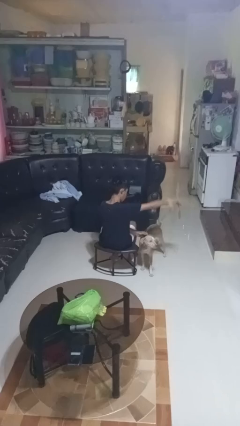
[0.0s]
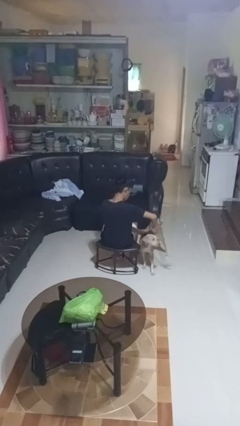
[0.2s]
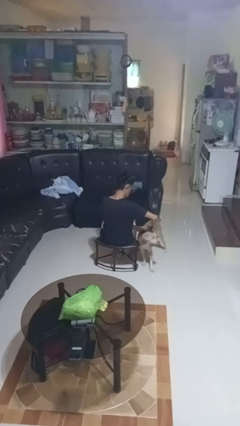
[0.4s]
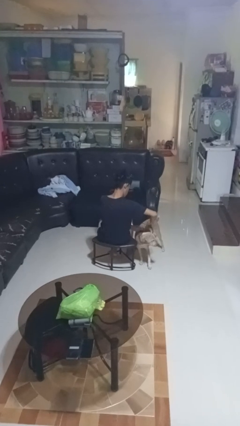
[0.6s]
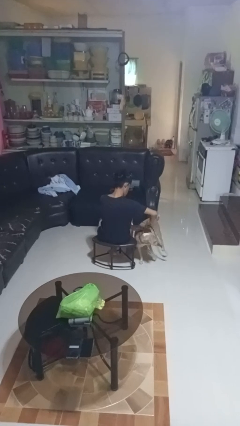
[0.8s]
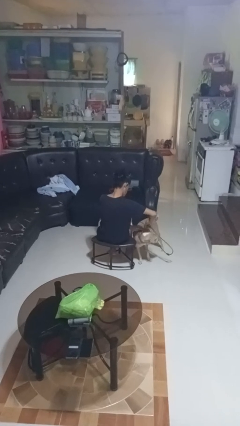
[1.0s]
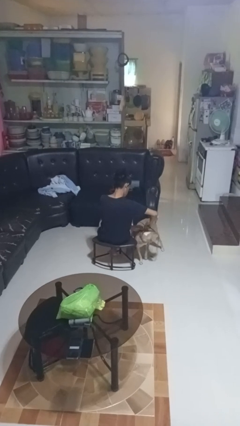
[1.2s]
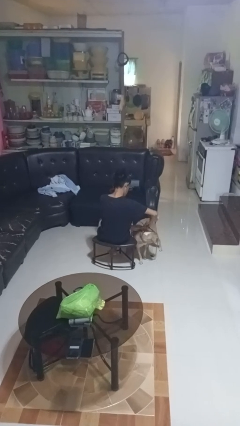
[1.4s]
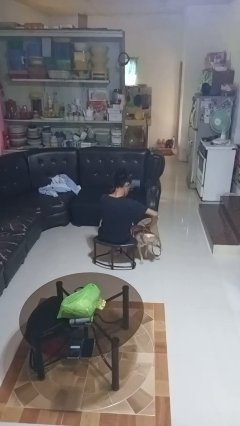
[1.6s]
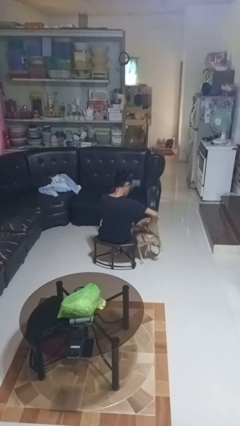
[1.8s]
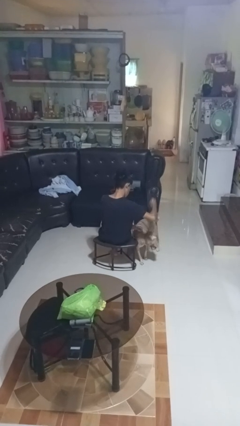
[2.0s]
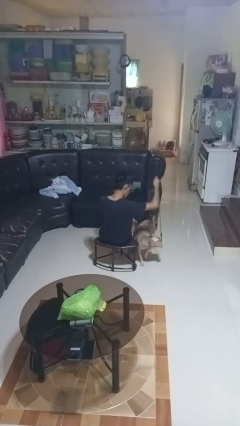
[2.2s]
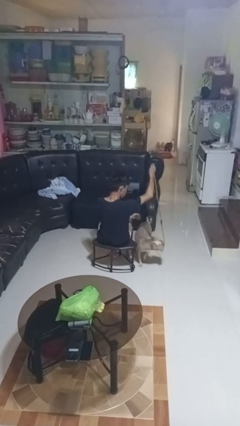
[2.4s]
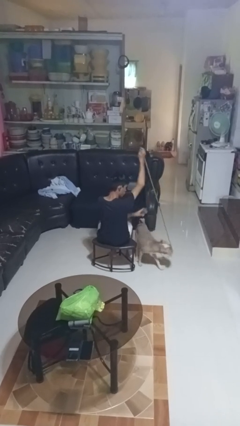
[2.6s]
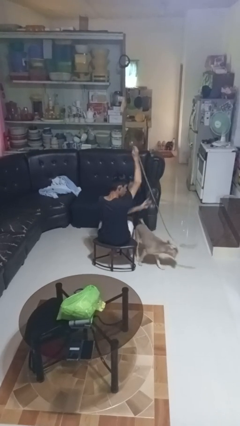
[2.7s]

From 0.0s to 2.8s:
person unattaches leash from dog

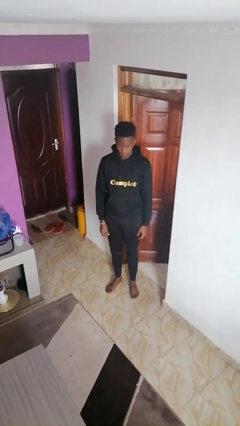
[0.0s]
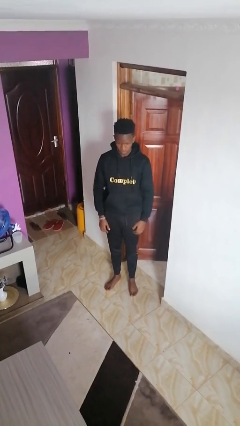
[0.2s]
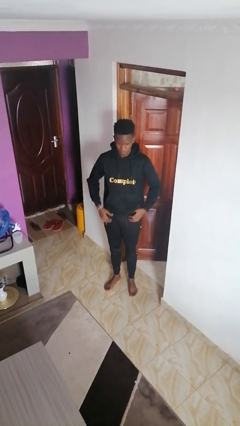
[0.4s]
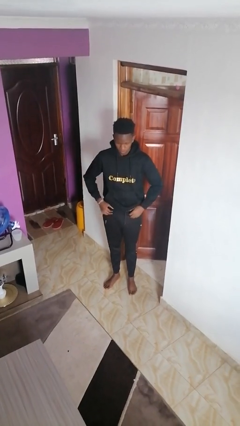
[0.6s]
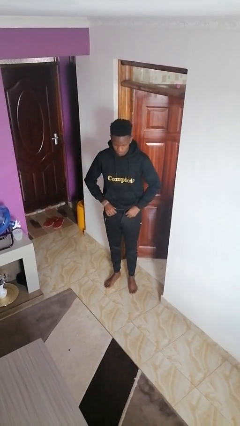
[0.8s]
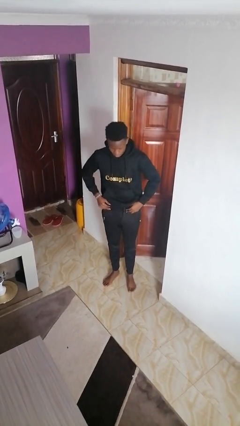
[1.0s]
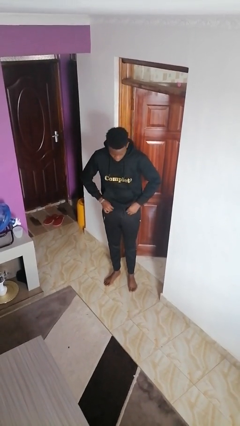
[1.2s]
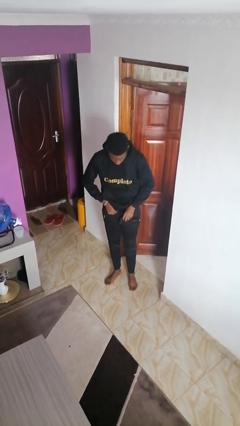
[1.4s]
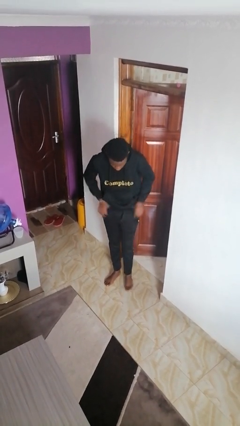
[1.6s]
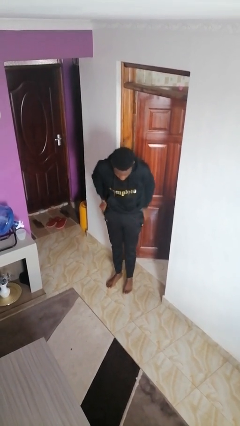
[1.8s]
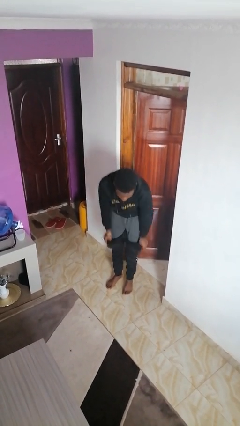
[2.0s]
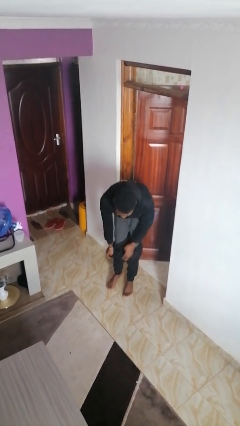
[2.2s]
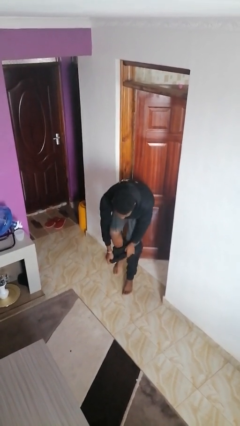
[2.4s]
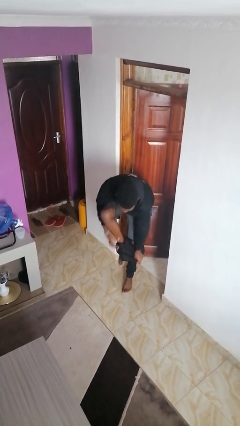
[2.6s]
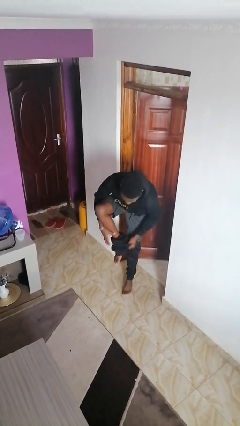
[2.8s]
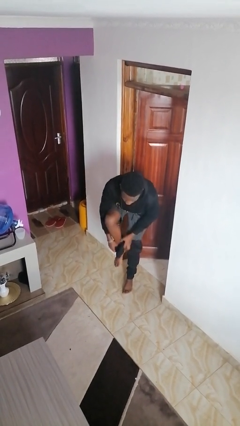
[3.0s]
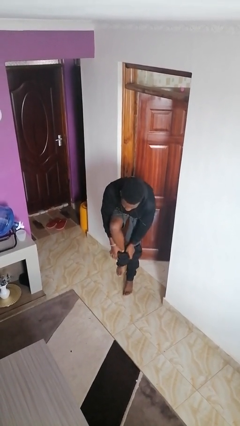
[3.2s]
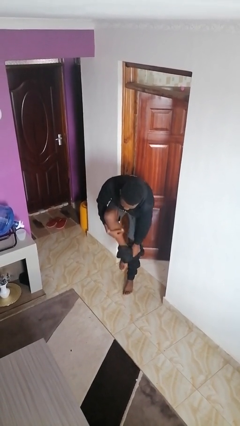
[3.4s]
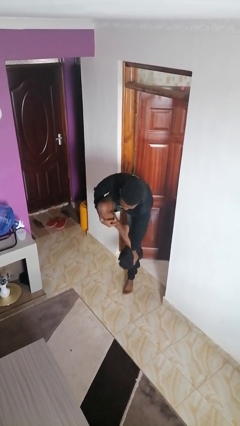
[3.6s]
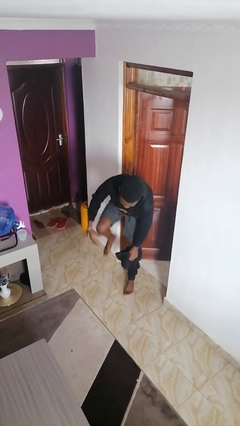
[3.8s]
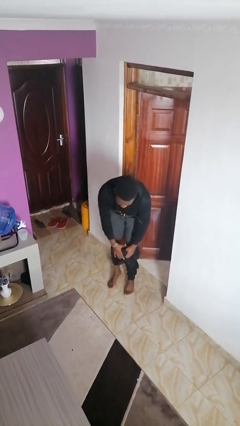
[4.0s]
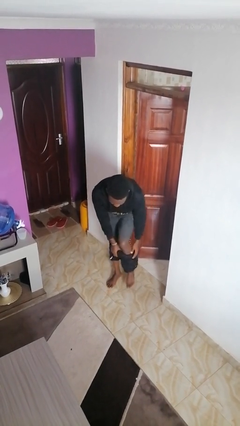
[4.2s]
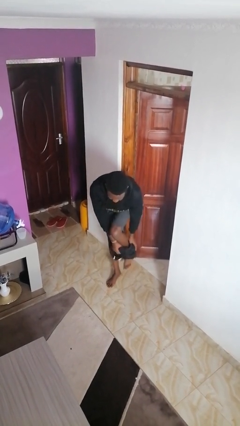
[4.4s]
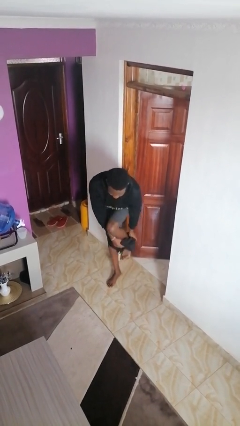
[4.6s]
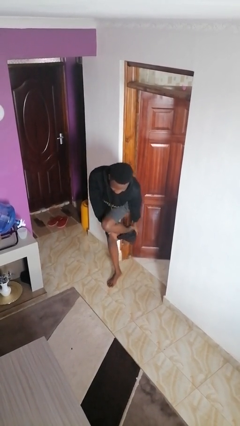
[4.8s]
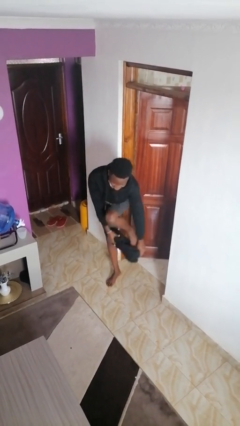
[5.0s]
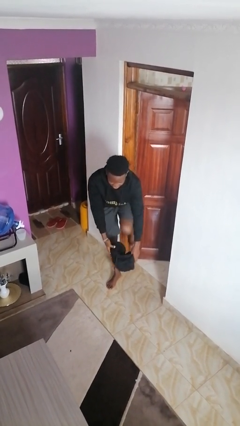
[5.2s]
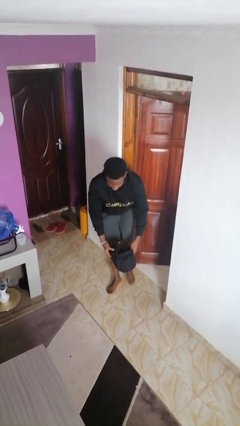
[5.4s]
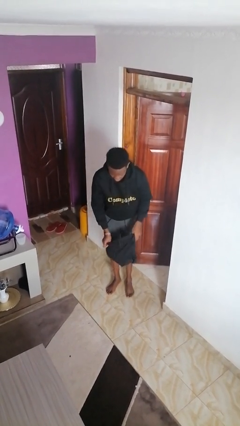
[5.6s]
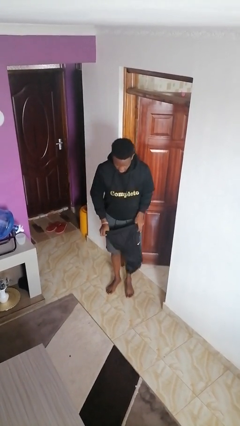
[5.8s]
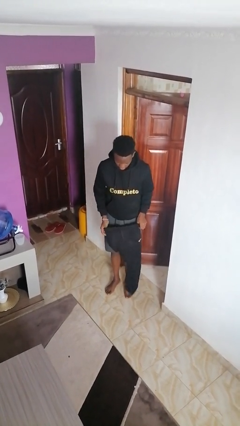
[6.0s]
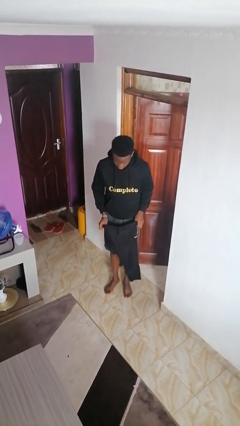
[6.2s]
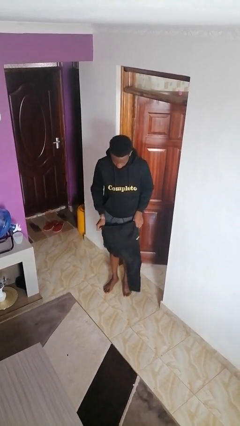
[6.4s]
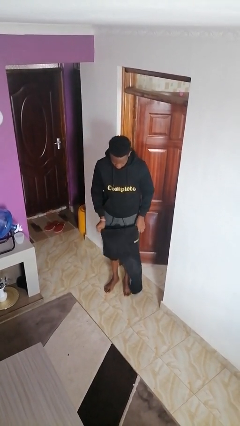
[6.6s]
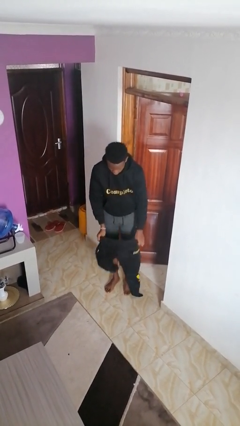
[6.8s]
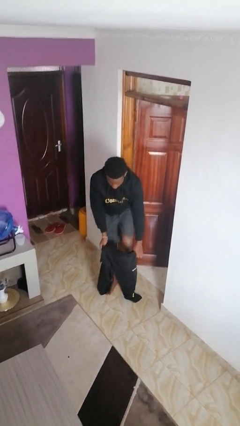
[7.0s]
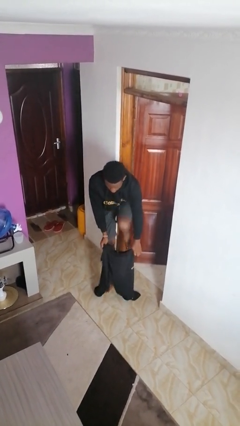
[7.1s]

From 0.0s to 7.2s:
person takes off pants

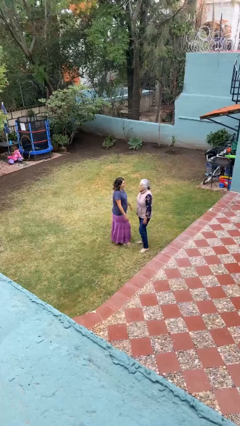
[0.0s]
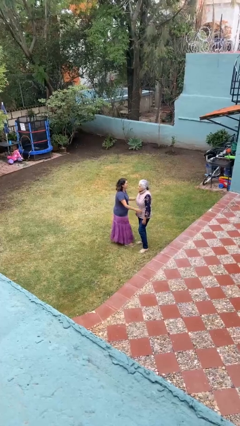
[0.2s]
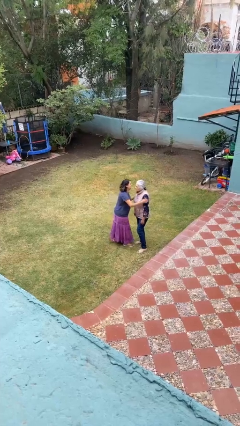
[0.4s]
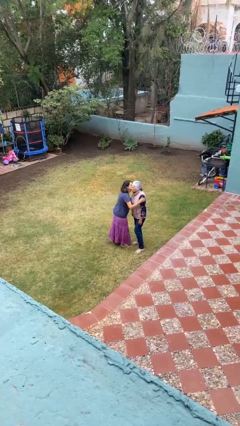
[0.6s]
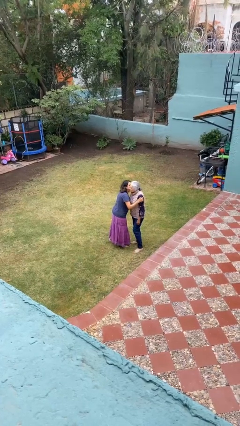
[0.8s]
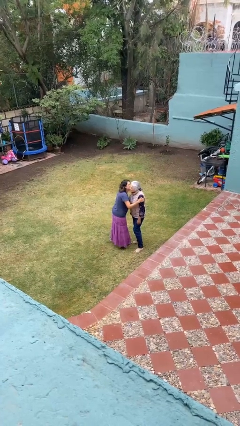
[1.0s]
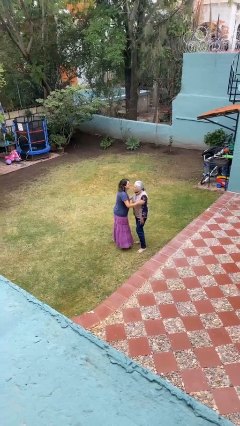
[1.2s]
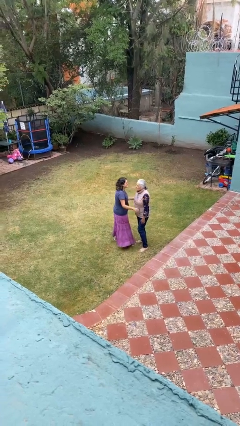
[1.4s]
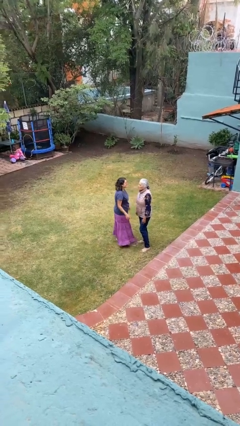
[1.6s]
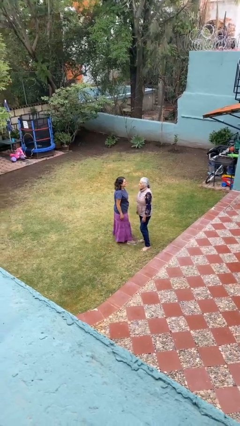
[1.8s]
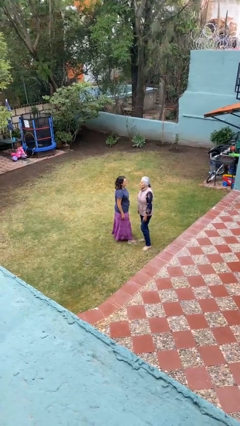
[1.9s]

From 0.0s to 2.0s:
person kisses cheek of person

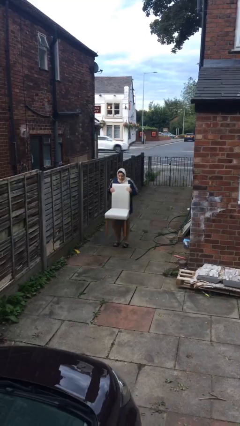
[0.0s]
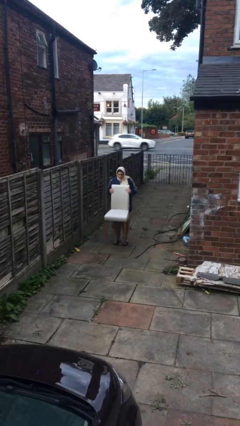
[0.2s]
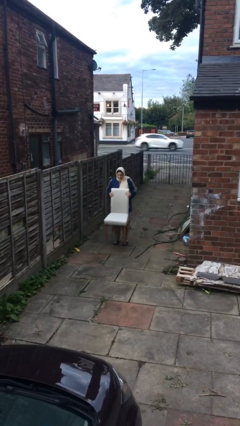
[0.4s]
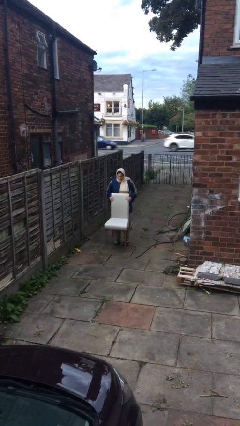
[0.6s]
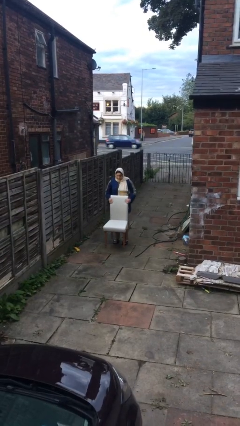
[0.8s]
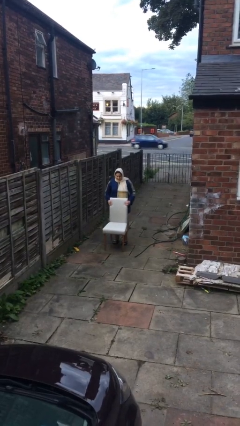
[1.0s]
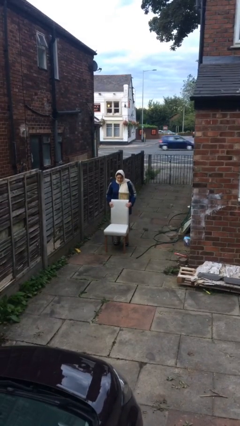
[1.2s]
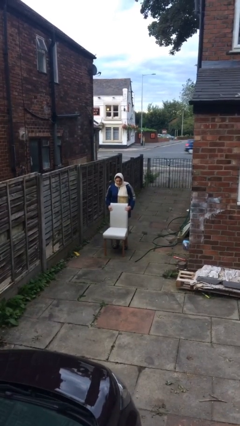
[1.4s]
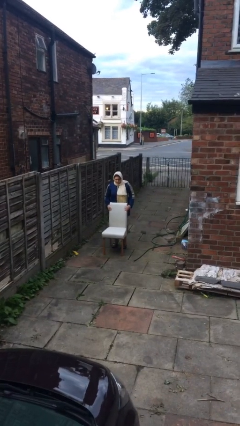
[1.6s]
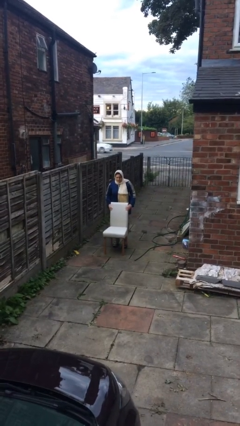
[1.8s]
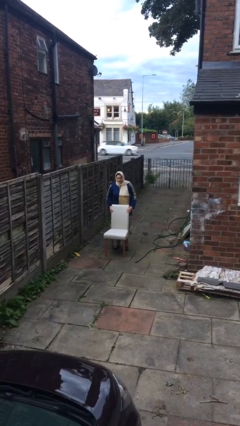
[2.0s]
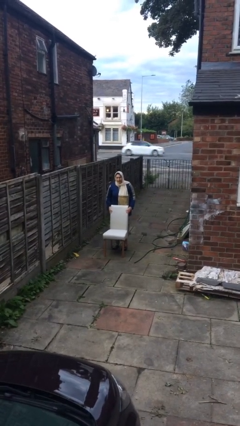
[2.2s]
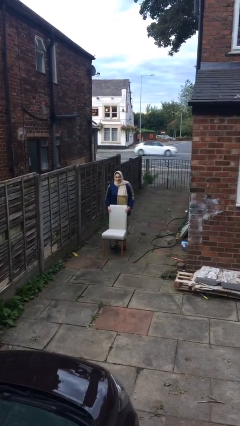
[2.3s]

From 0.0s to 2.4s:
person puts down object on floor

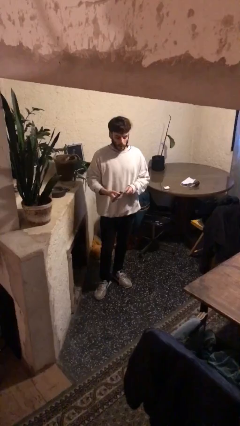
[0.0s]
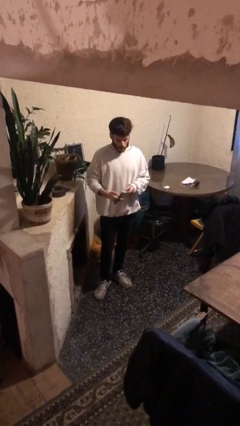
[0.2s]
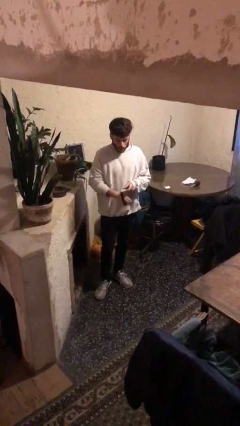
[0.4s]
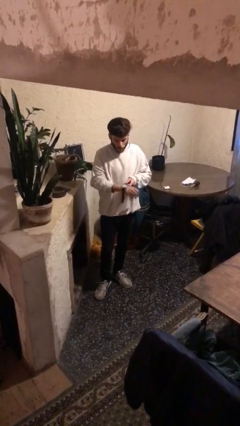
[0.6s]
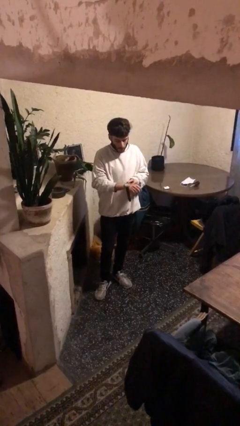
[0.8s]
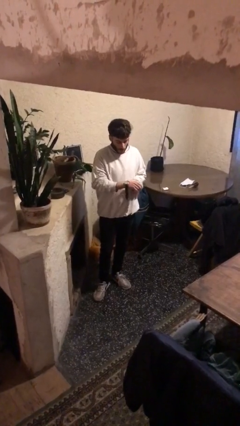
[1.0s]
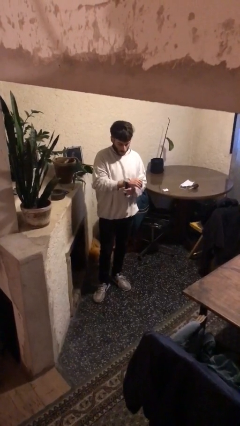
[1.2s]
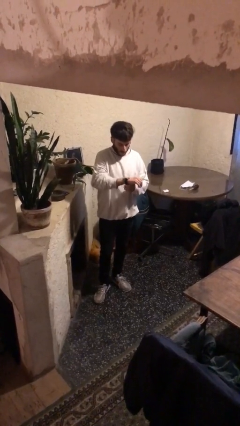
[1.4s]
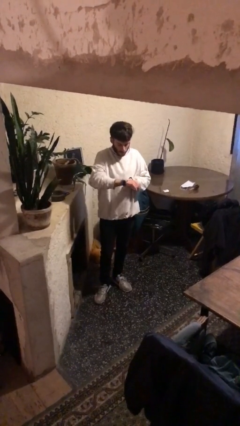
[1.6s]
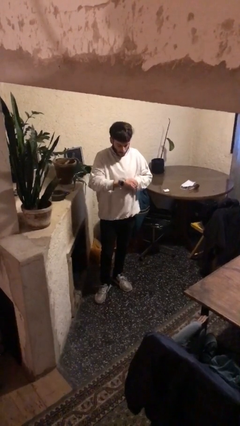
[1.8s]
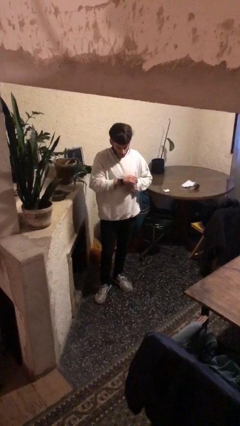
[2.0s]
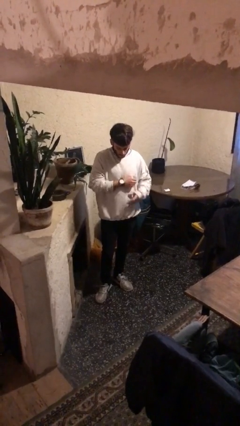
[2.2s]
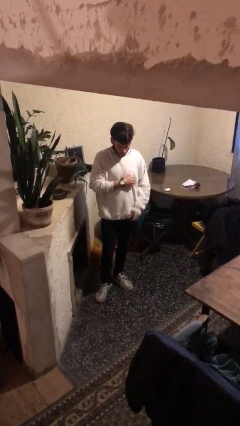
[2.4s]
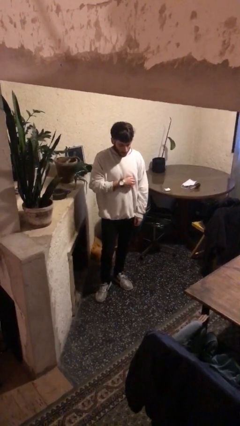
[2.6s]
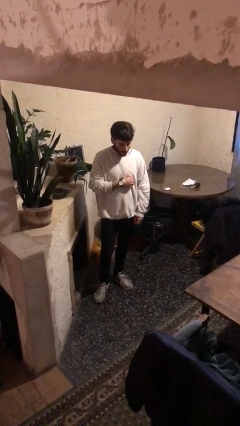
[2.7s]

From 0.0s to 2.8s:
person puts on wristwatch

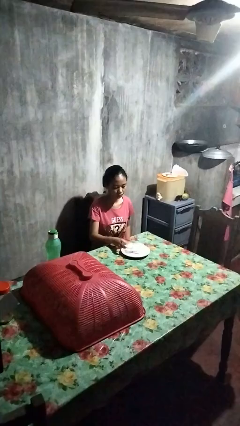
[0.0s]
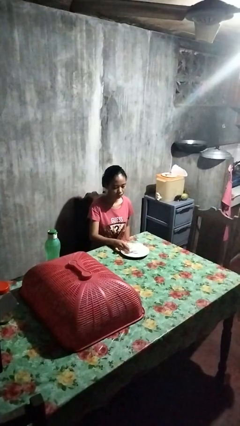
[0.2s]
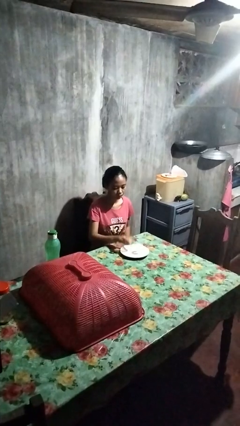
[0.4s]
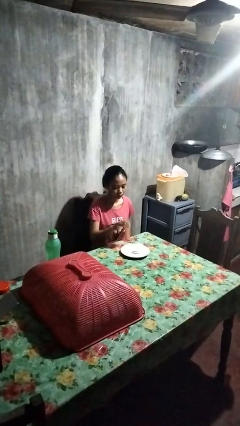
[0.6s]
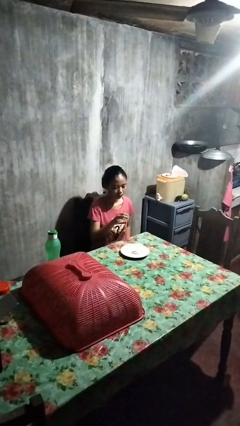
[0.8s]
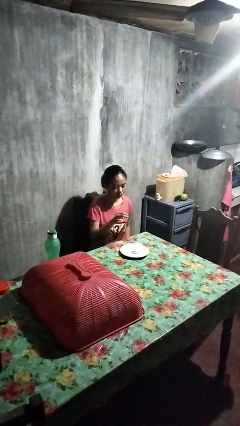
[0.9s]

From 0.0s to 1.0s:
person picks up object from table
